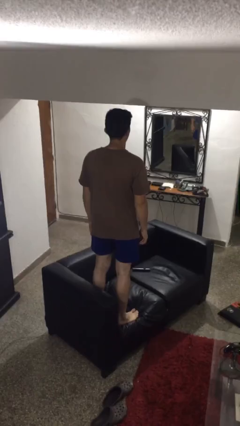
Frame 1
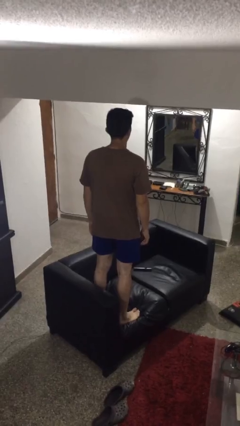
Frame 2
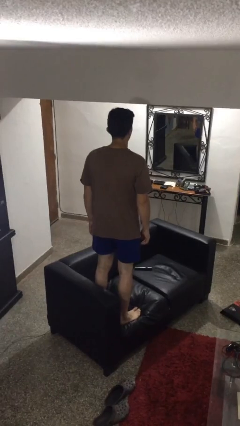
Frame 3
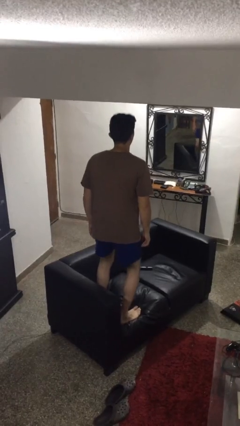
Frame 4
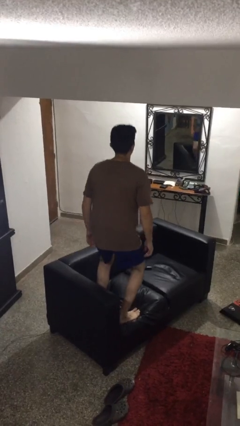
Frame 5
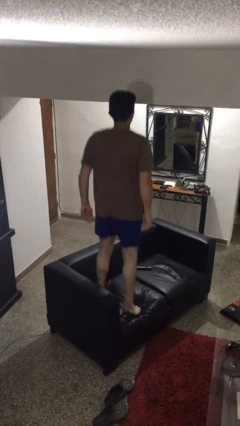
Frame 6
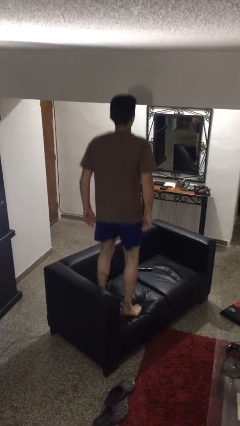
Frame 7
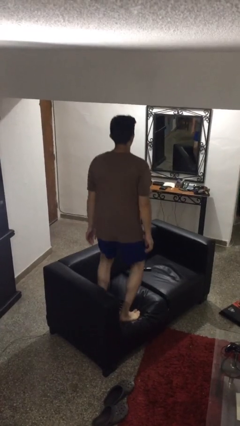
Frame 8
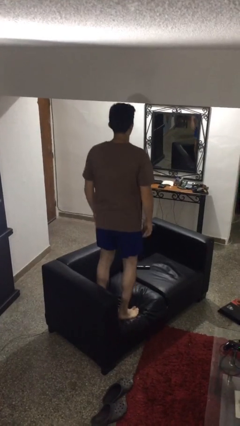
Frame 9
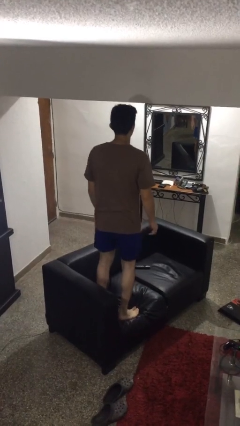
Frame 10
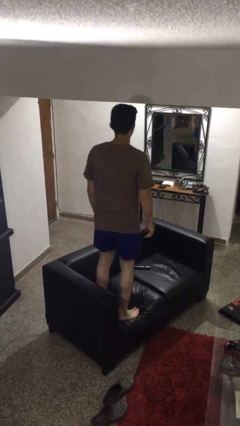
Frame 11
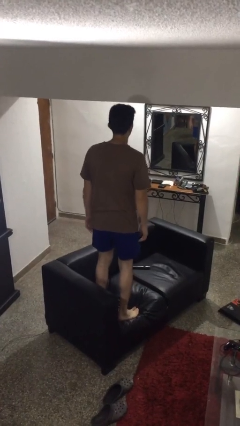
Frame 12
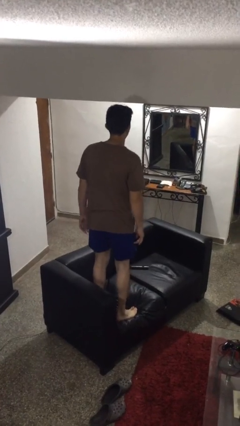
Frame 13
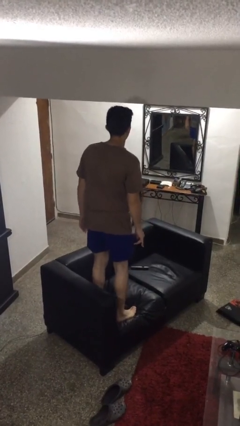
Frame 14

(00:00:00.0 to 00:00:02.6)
person jumps on couch

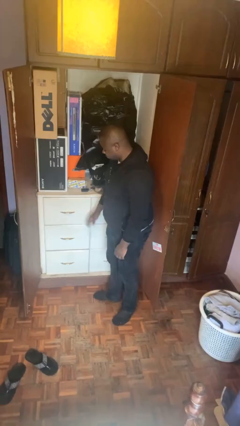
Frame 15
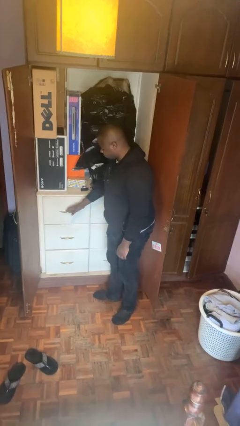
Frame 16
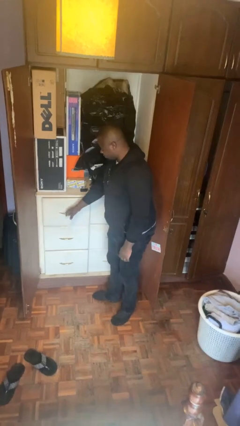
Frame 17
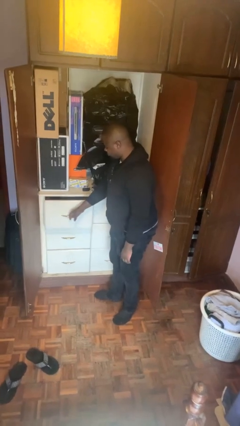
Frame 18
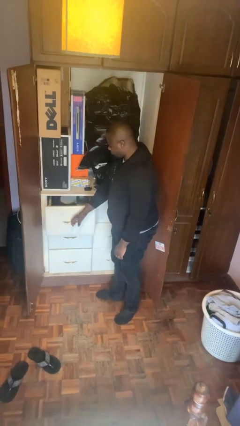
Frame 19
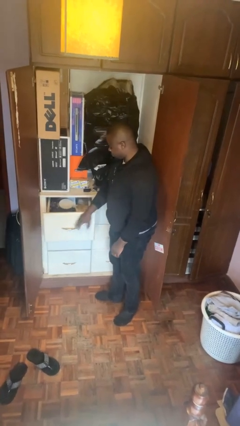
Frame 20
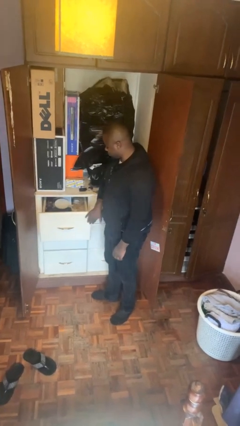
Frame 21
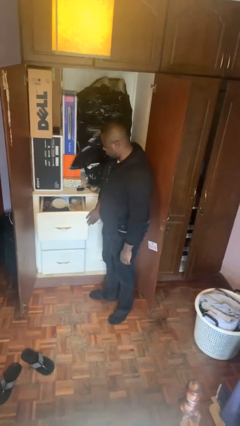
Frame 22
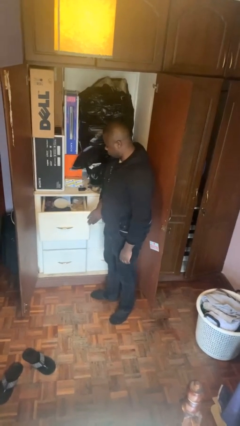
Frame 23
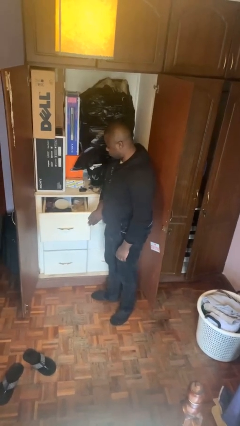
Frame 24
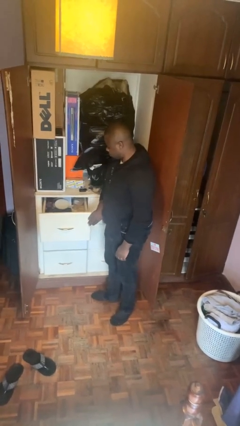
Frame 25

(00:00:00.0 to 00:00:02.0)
person opens dresser drawer

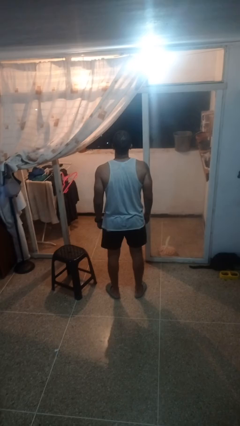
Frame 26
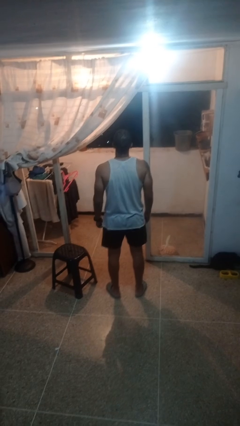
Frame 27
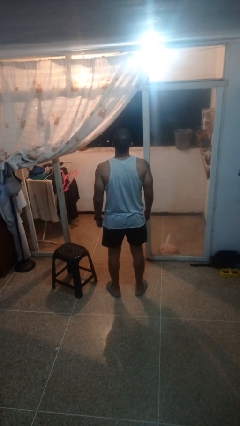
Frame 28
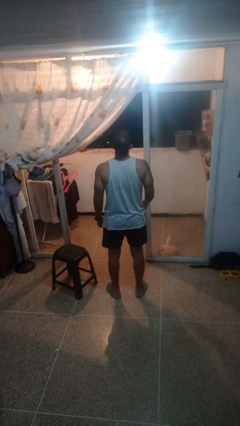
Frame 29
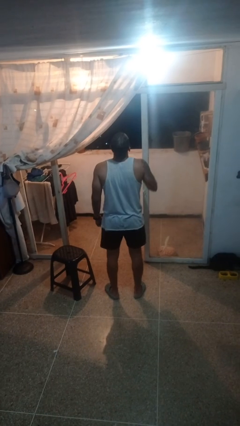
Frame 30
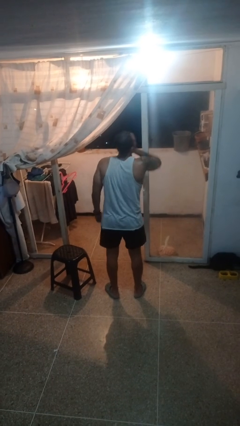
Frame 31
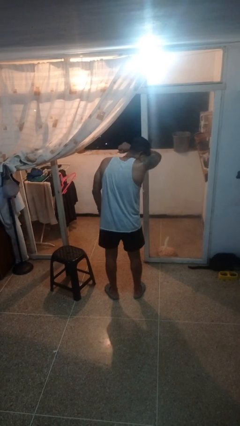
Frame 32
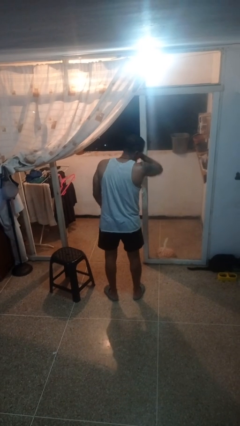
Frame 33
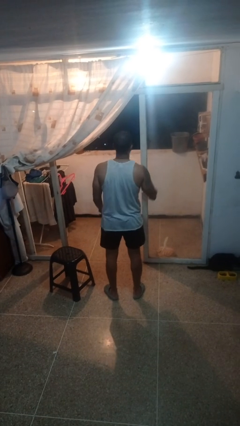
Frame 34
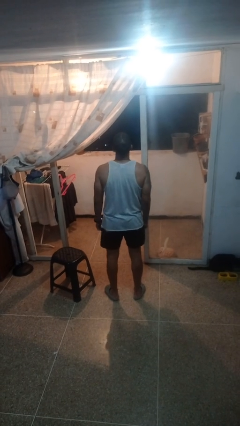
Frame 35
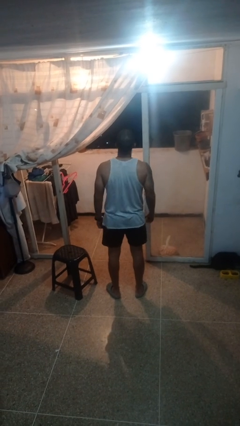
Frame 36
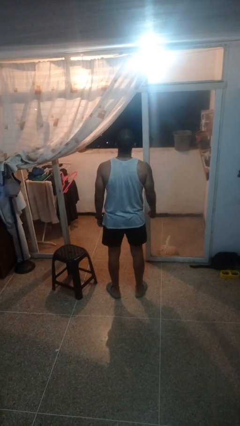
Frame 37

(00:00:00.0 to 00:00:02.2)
person sneezes into arm

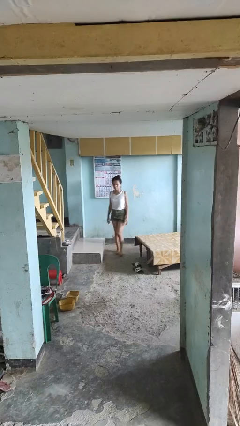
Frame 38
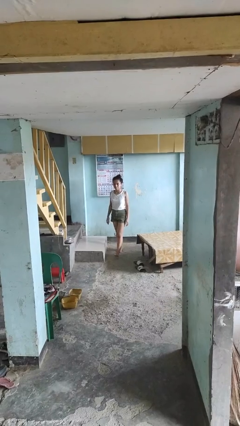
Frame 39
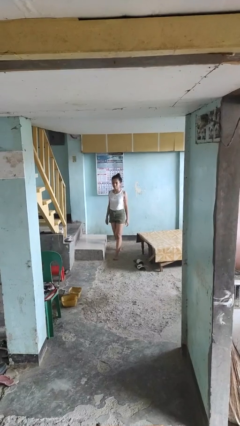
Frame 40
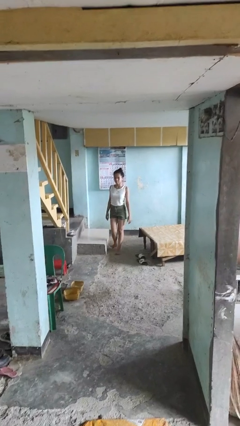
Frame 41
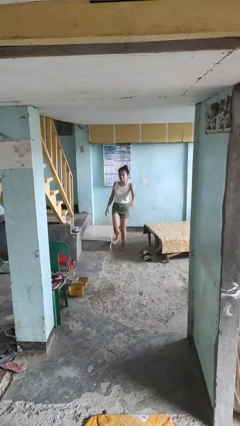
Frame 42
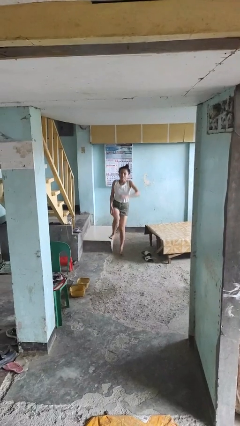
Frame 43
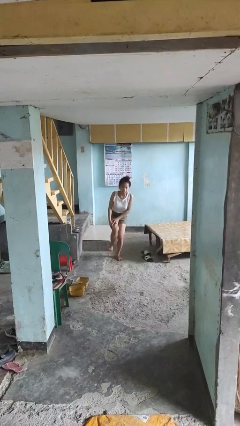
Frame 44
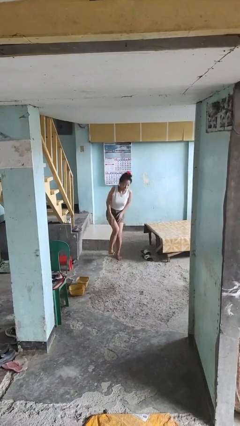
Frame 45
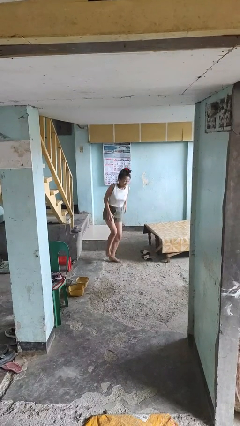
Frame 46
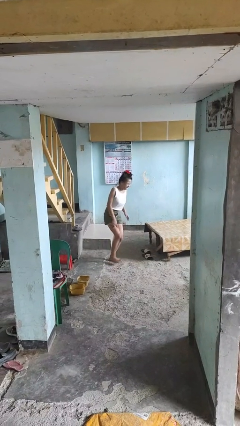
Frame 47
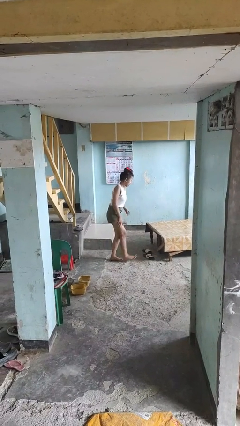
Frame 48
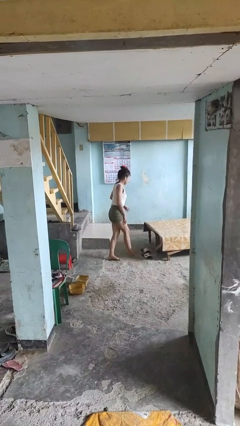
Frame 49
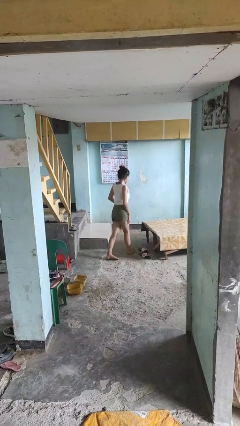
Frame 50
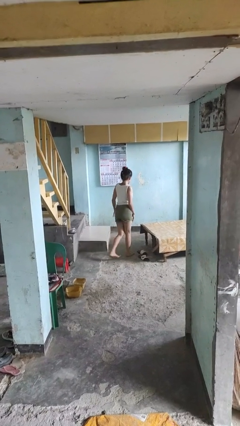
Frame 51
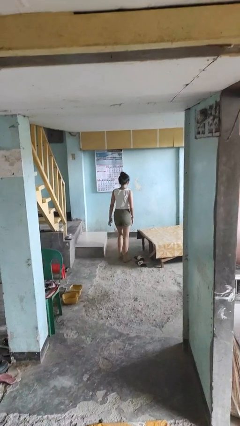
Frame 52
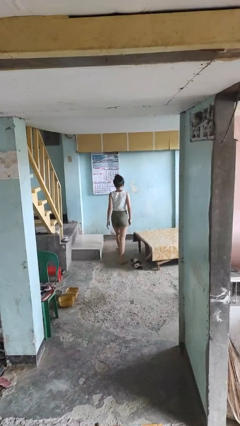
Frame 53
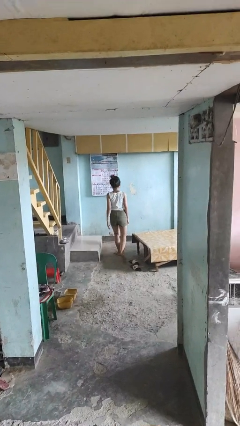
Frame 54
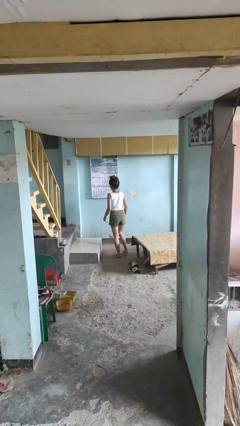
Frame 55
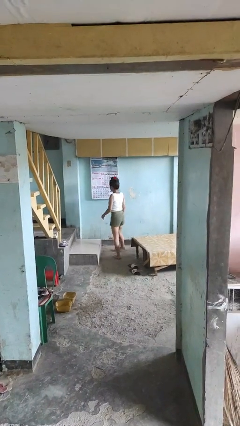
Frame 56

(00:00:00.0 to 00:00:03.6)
person stubs toe

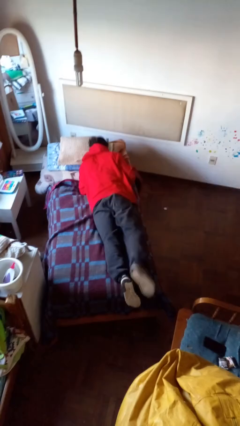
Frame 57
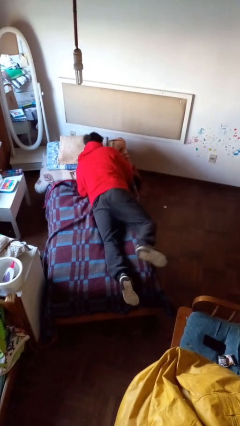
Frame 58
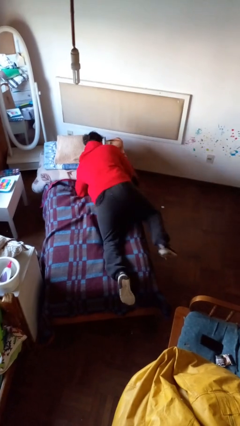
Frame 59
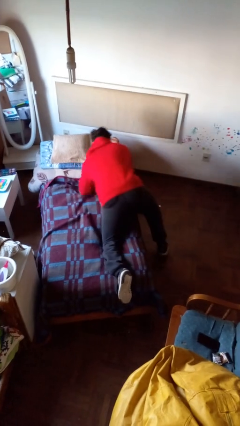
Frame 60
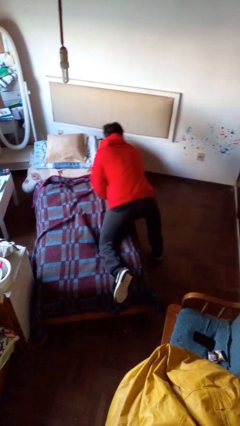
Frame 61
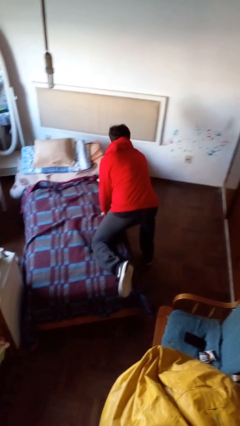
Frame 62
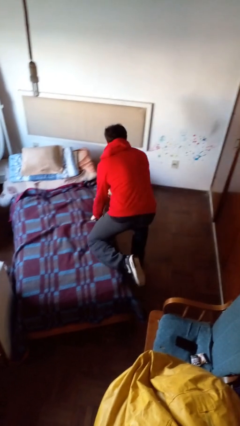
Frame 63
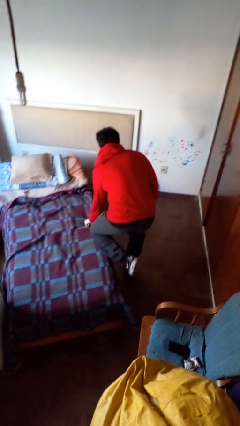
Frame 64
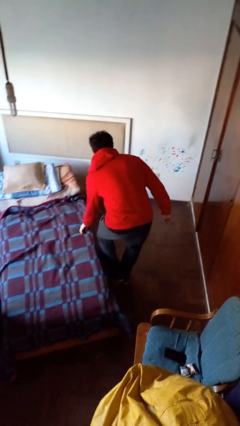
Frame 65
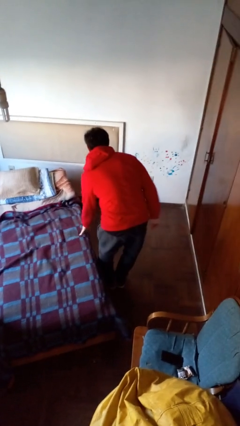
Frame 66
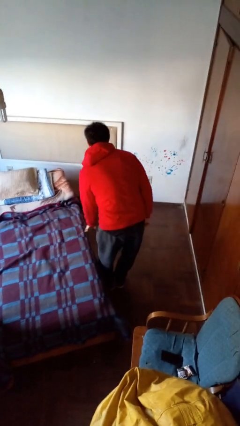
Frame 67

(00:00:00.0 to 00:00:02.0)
person stands up

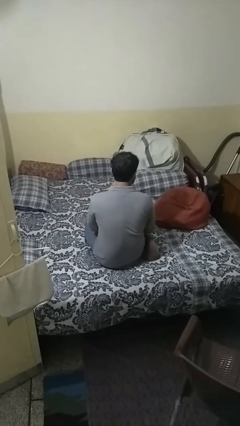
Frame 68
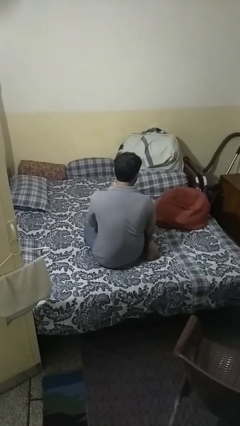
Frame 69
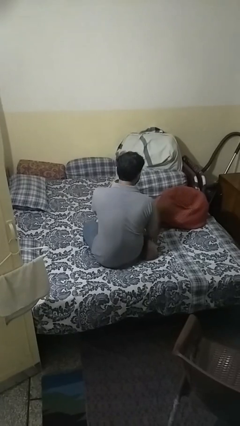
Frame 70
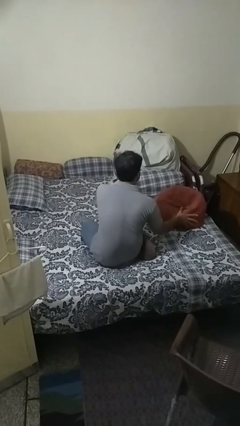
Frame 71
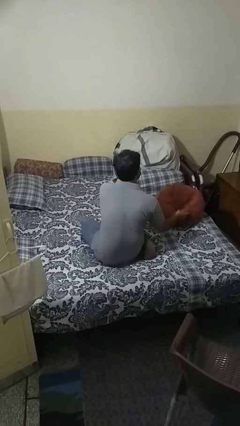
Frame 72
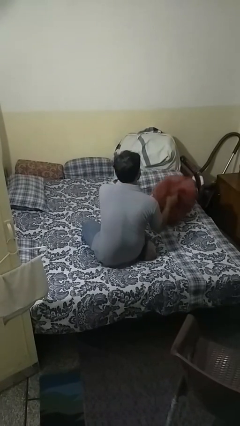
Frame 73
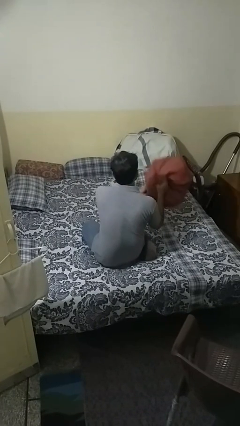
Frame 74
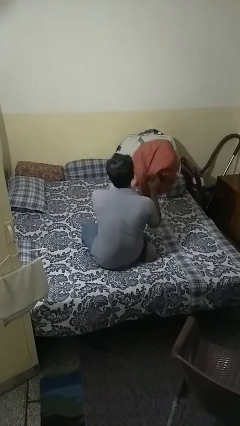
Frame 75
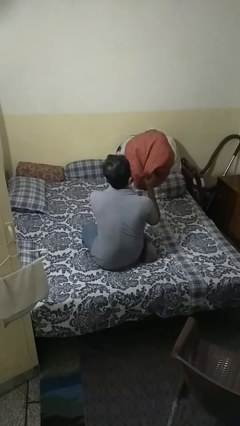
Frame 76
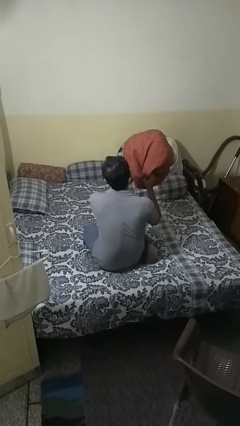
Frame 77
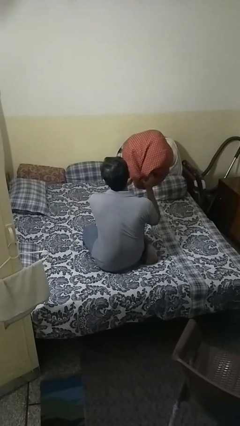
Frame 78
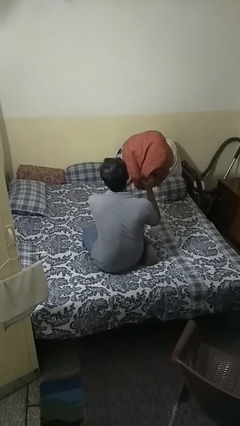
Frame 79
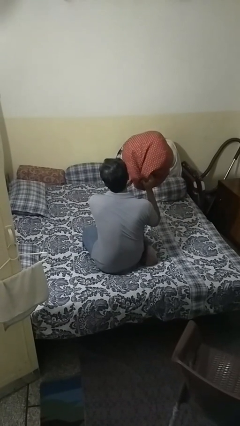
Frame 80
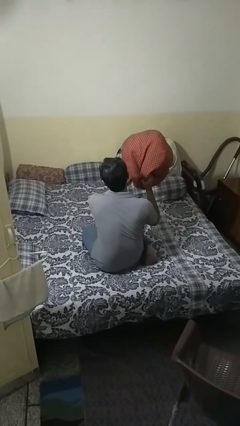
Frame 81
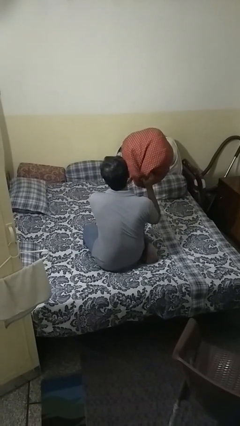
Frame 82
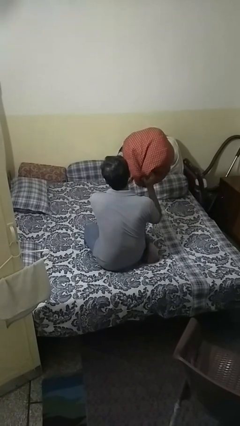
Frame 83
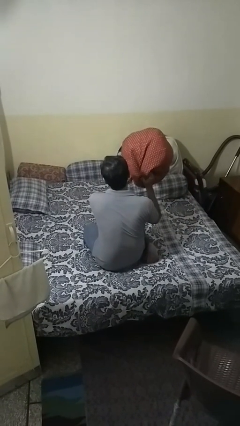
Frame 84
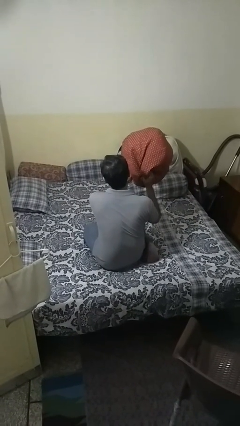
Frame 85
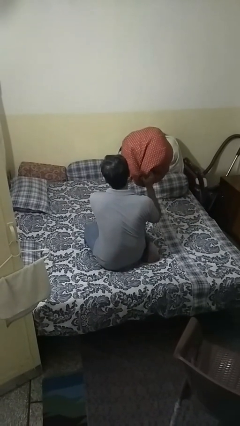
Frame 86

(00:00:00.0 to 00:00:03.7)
person picks up object from bed

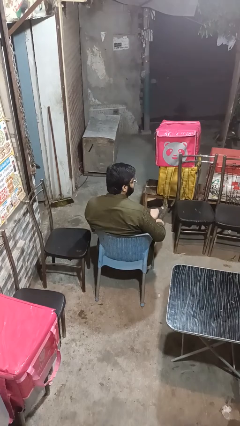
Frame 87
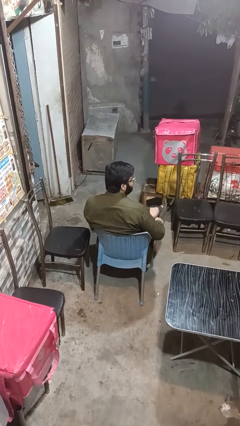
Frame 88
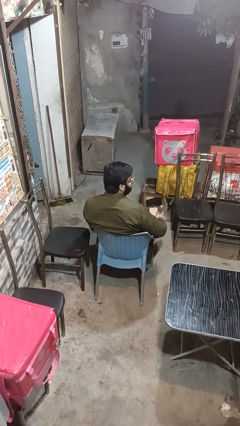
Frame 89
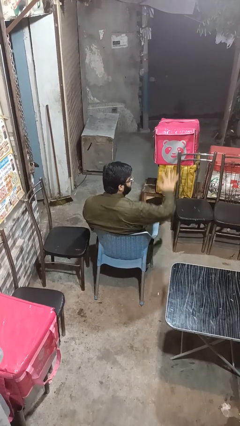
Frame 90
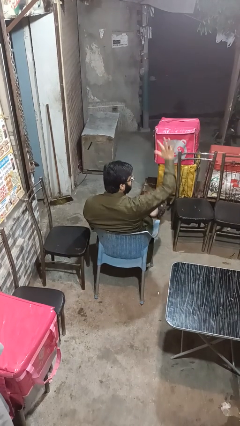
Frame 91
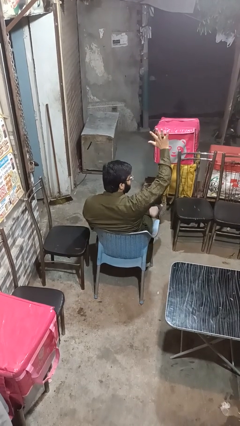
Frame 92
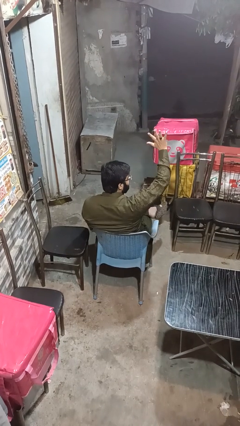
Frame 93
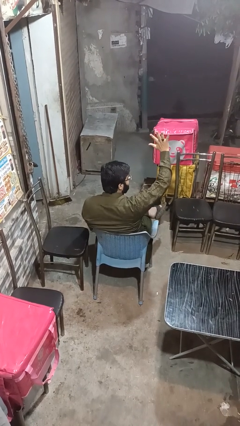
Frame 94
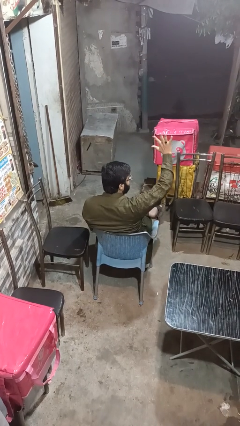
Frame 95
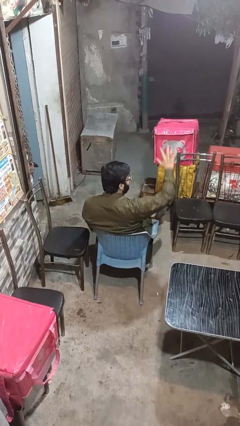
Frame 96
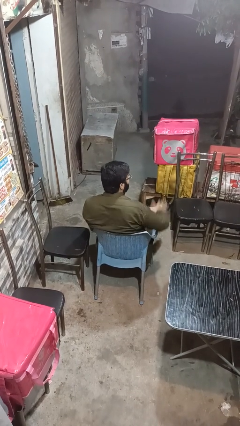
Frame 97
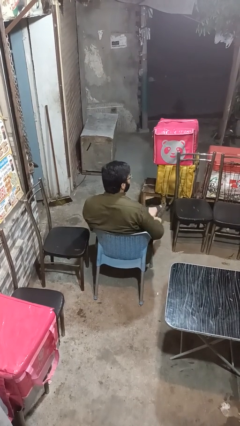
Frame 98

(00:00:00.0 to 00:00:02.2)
person gestures number five
